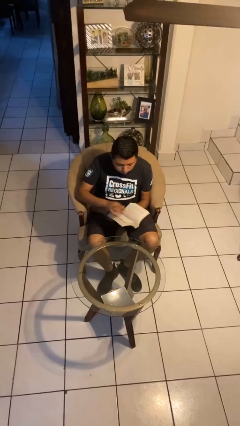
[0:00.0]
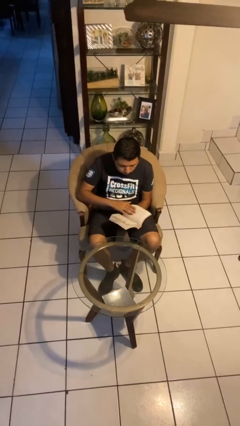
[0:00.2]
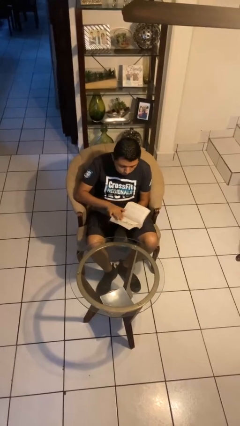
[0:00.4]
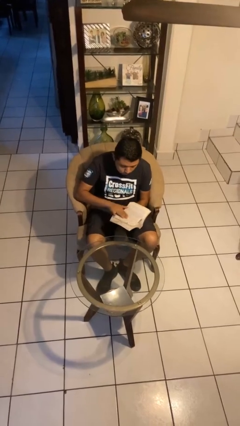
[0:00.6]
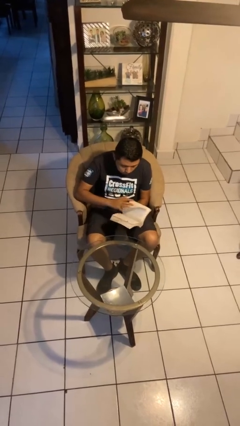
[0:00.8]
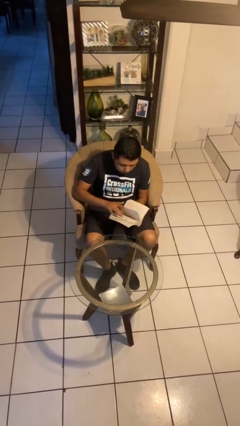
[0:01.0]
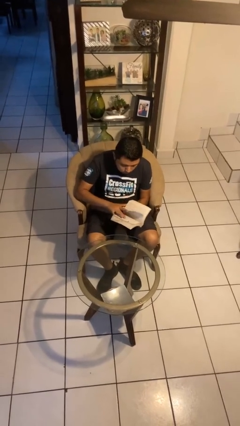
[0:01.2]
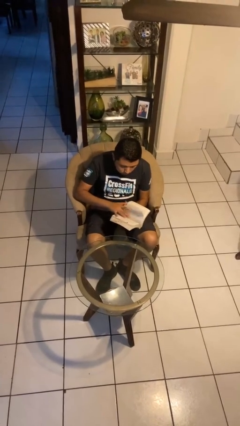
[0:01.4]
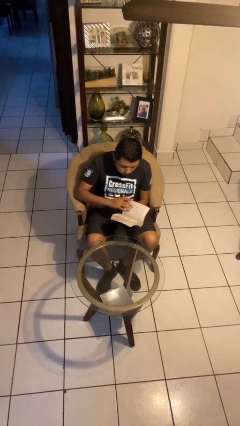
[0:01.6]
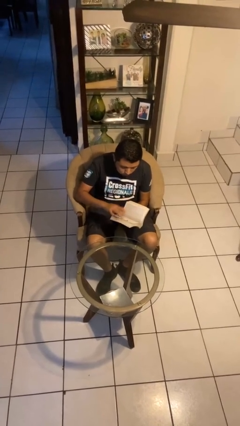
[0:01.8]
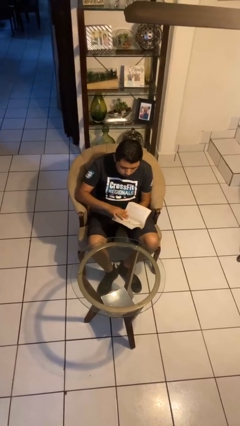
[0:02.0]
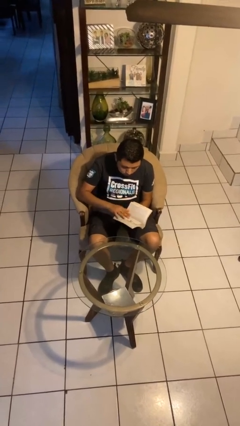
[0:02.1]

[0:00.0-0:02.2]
person reads book

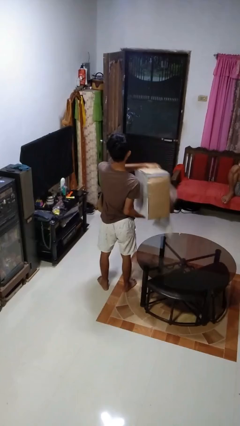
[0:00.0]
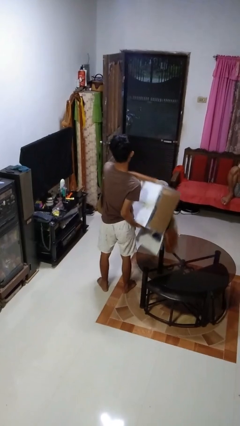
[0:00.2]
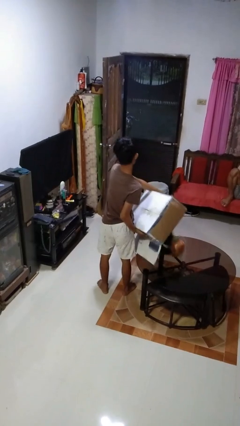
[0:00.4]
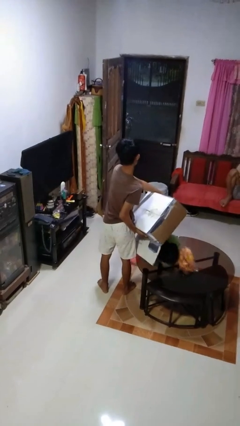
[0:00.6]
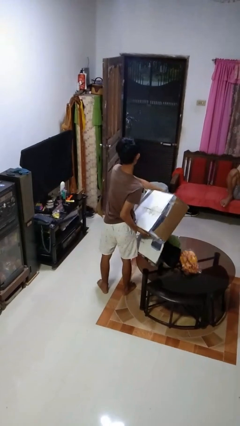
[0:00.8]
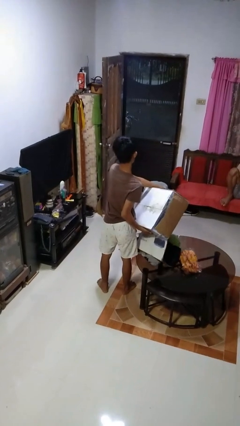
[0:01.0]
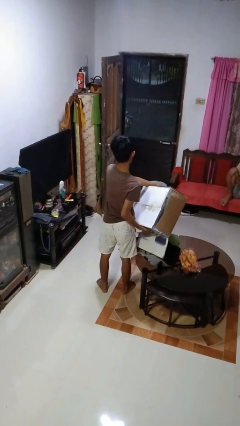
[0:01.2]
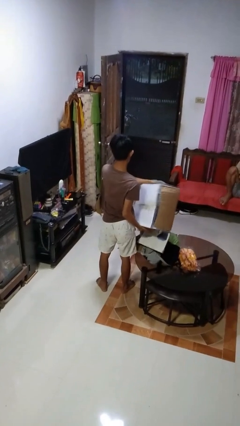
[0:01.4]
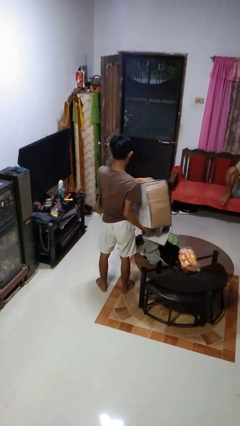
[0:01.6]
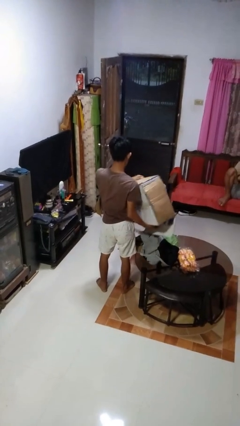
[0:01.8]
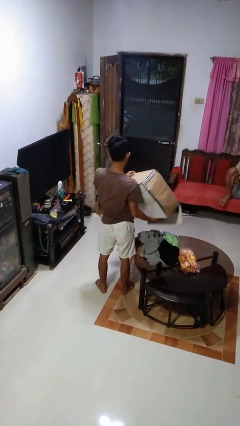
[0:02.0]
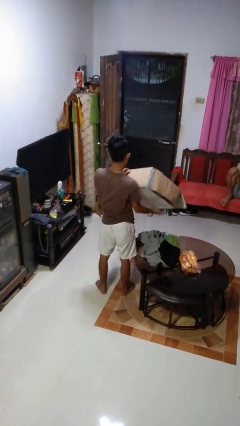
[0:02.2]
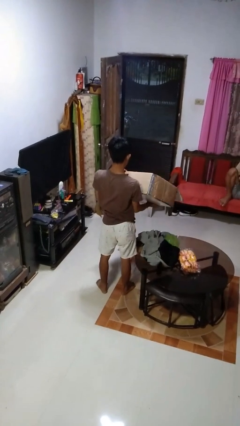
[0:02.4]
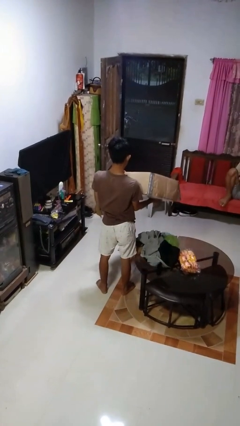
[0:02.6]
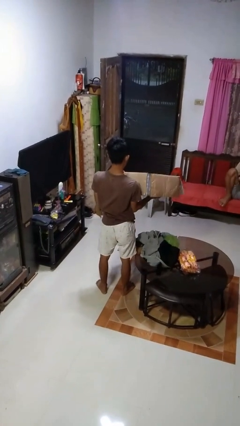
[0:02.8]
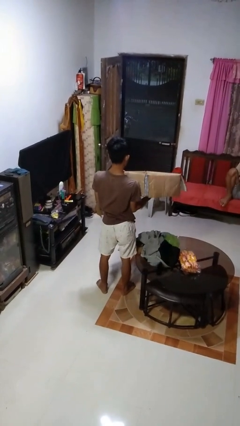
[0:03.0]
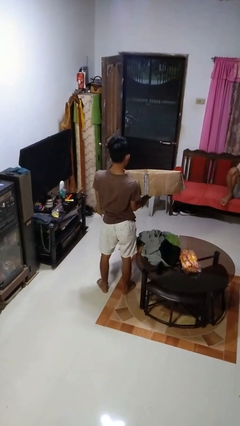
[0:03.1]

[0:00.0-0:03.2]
person unloads box onto table

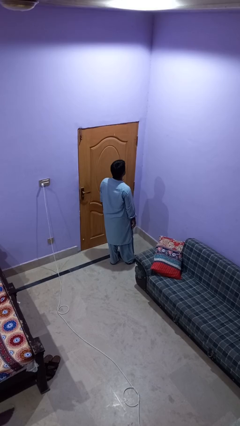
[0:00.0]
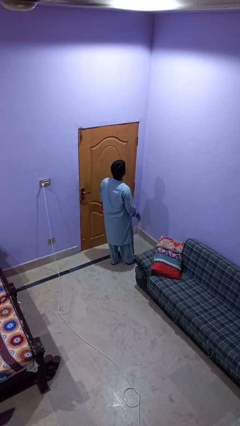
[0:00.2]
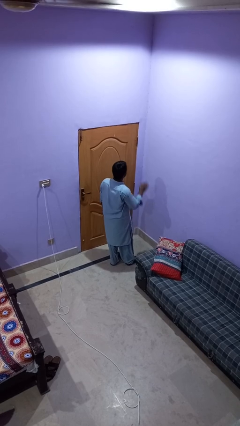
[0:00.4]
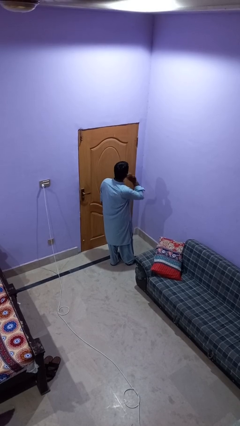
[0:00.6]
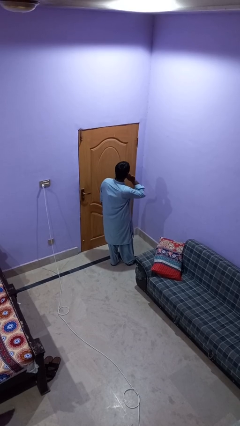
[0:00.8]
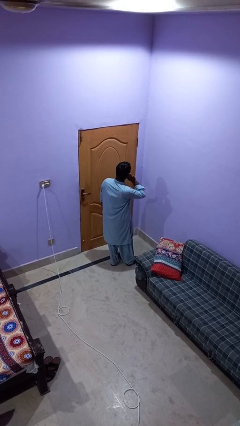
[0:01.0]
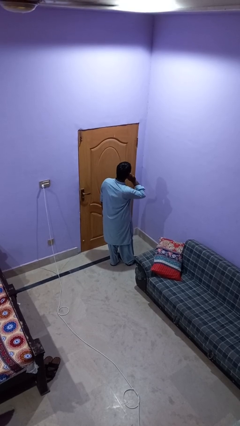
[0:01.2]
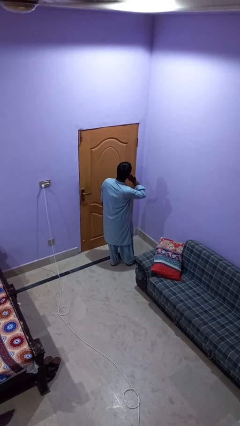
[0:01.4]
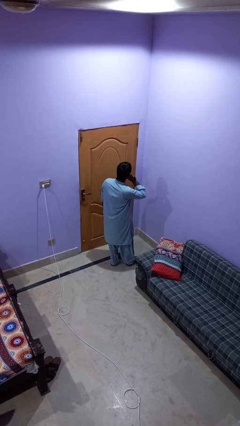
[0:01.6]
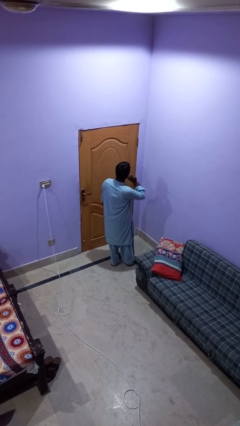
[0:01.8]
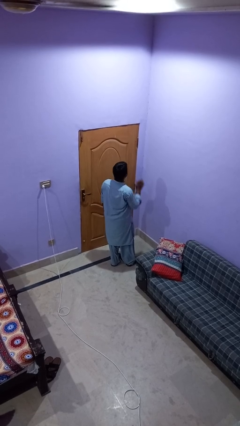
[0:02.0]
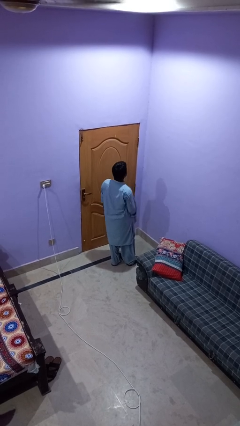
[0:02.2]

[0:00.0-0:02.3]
person gestures listen closely

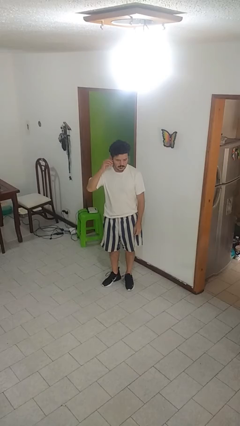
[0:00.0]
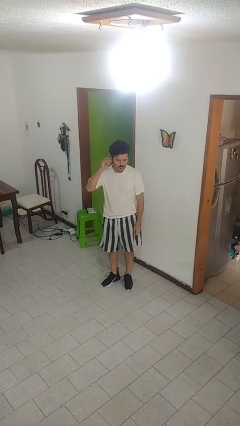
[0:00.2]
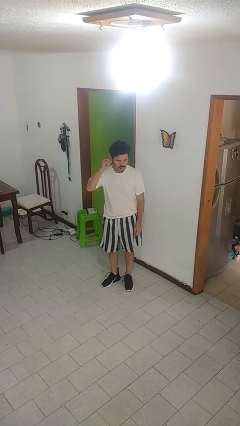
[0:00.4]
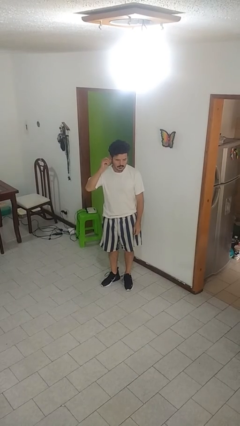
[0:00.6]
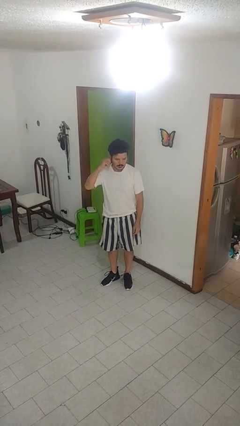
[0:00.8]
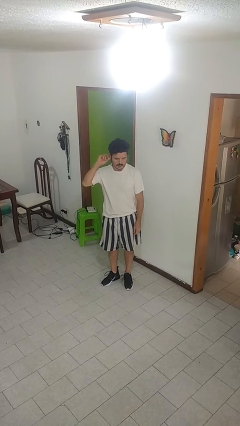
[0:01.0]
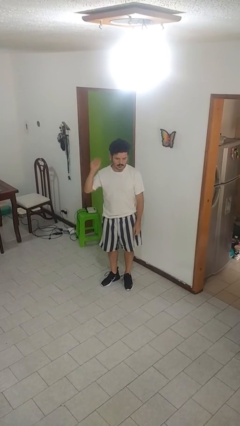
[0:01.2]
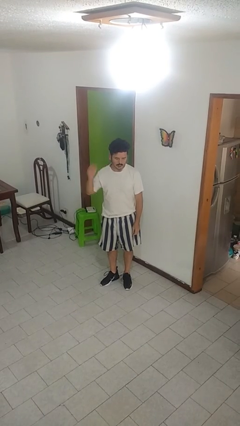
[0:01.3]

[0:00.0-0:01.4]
person touches earlobe

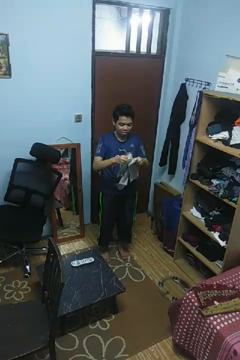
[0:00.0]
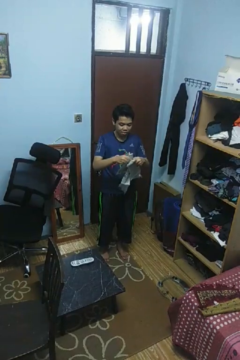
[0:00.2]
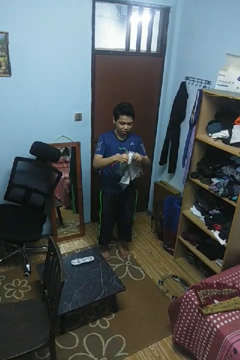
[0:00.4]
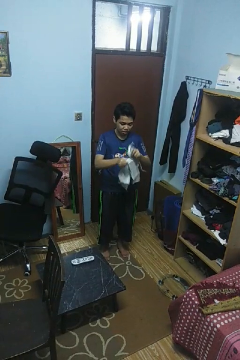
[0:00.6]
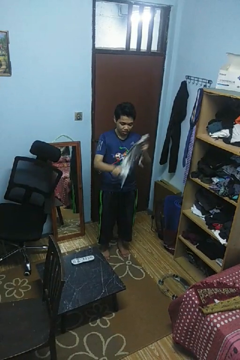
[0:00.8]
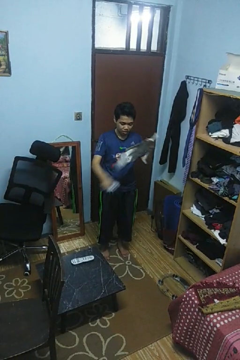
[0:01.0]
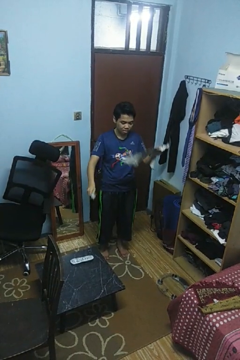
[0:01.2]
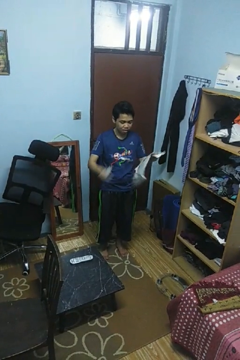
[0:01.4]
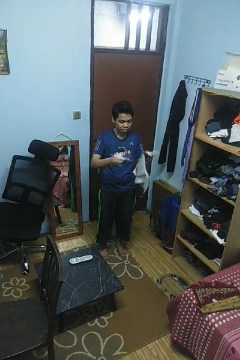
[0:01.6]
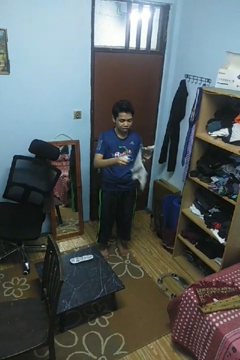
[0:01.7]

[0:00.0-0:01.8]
person tears paper

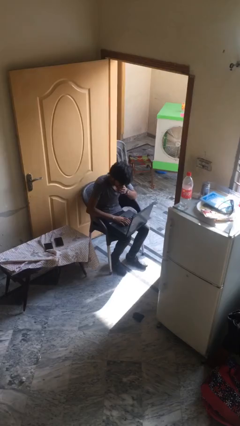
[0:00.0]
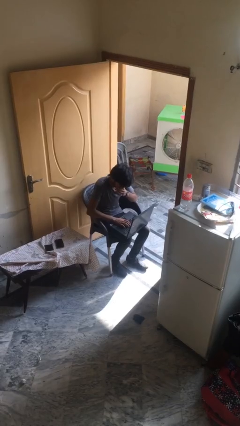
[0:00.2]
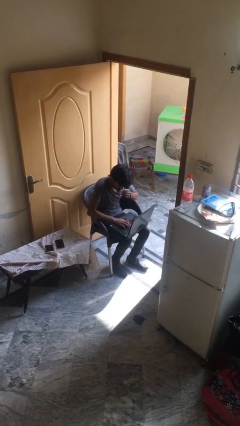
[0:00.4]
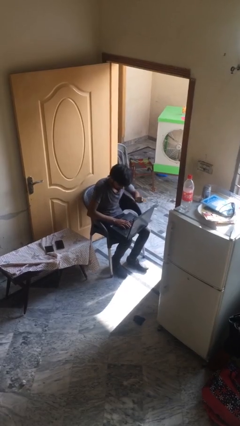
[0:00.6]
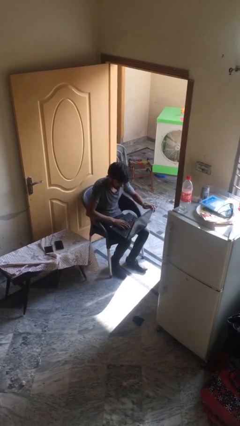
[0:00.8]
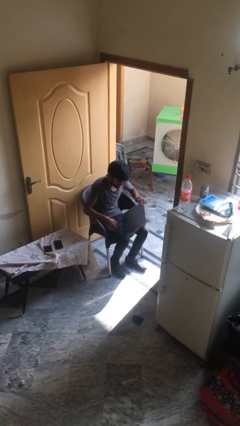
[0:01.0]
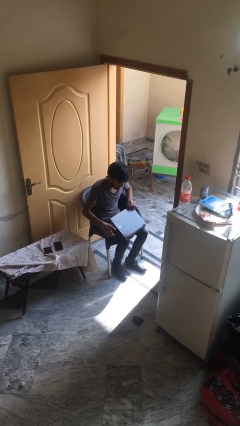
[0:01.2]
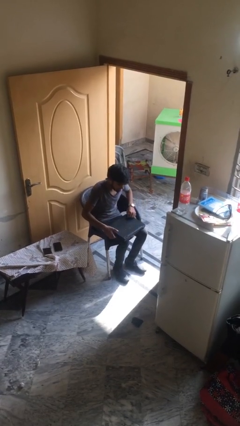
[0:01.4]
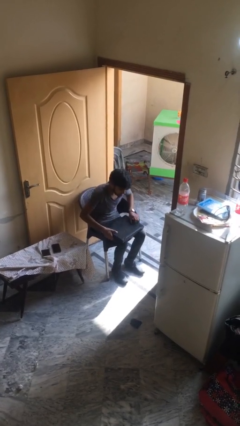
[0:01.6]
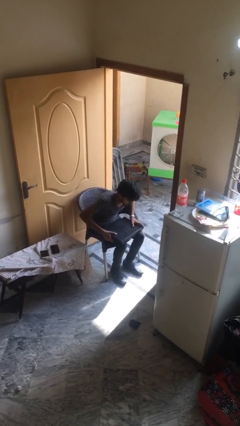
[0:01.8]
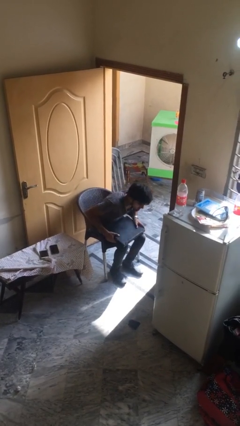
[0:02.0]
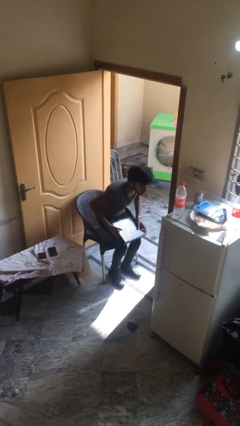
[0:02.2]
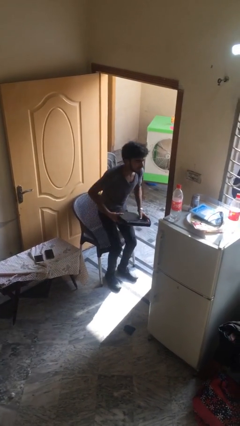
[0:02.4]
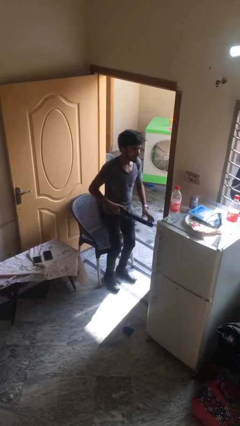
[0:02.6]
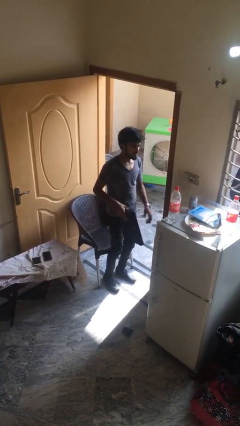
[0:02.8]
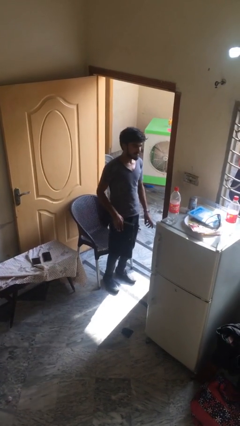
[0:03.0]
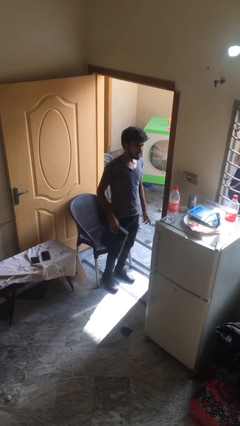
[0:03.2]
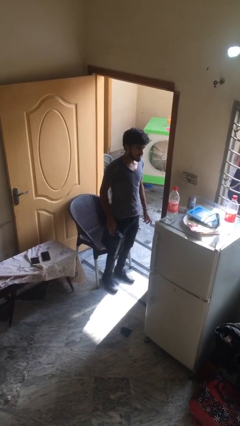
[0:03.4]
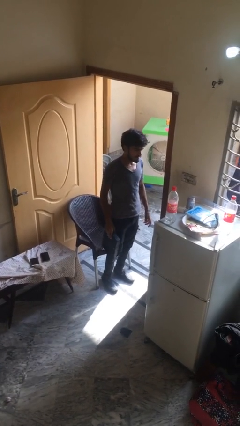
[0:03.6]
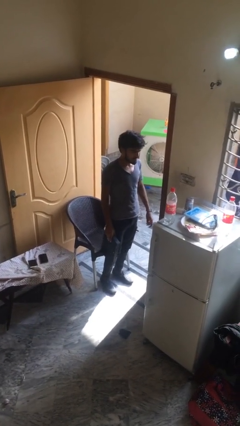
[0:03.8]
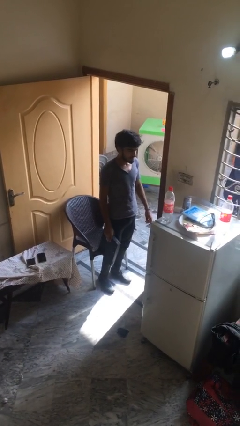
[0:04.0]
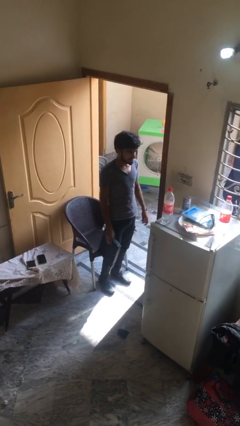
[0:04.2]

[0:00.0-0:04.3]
person stands up

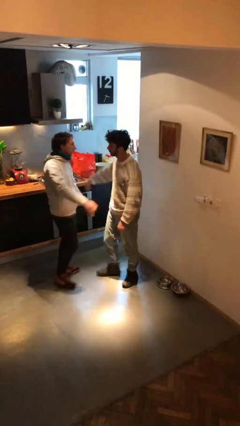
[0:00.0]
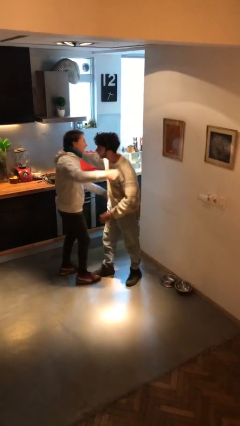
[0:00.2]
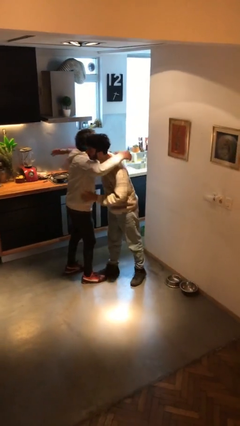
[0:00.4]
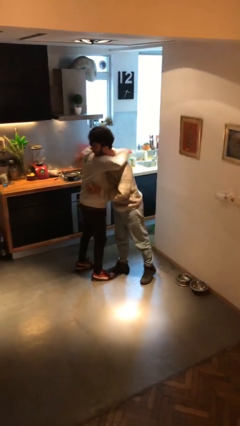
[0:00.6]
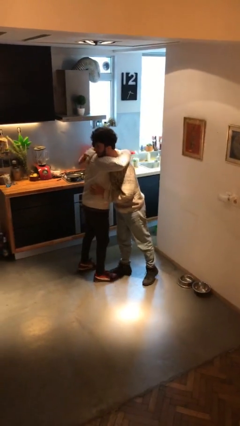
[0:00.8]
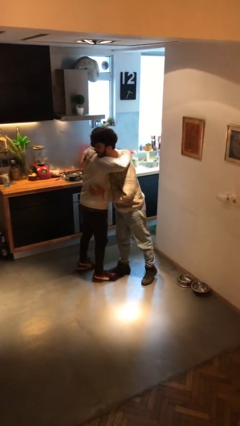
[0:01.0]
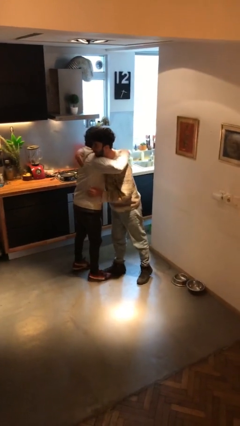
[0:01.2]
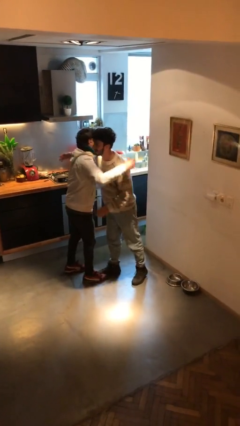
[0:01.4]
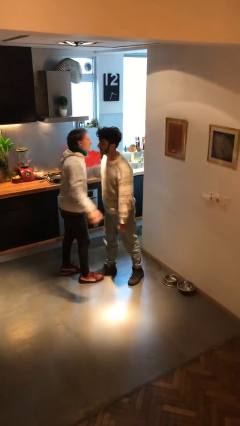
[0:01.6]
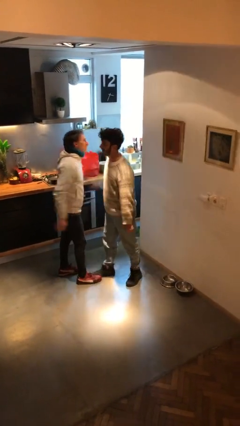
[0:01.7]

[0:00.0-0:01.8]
person embraces person

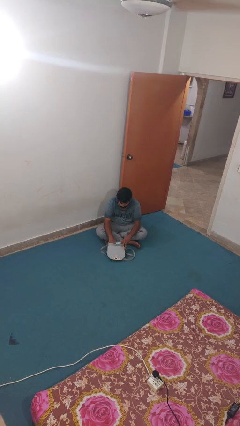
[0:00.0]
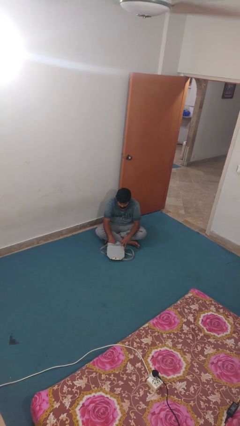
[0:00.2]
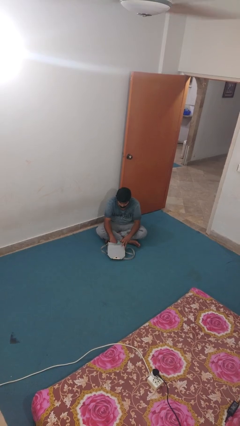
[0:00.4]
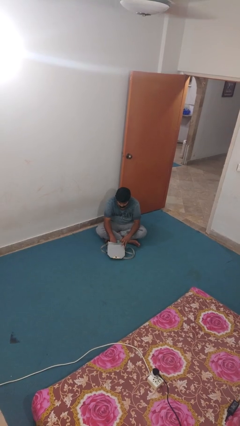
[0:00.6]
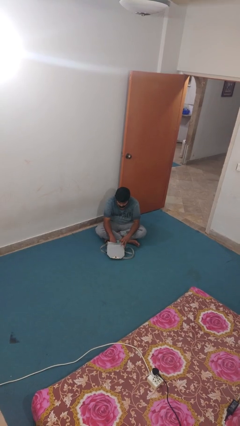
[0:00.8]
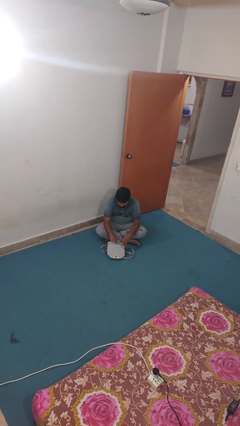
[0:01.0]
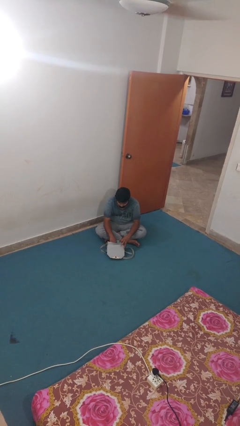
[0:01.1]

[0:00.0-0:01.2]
person searches in purse
